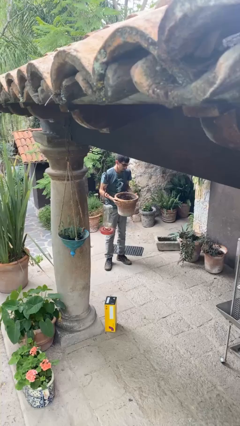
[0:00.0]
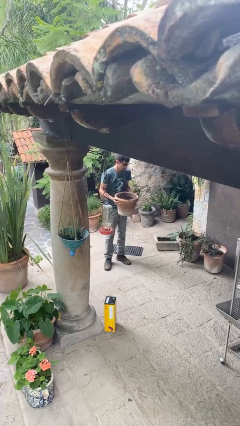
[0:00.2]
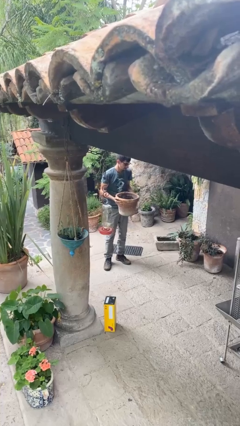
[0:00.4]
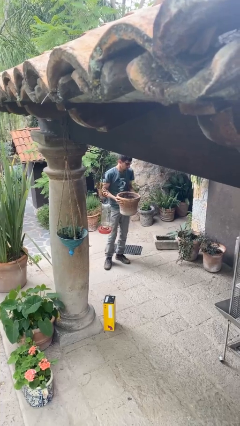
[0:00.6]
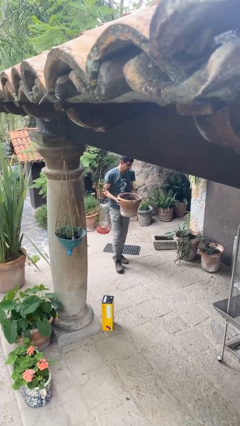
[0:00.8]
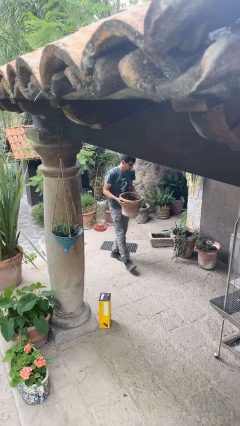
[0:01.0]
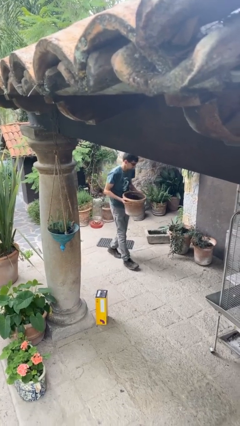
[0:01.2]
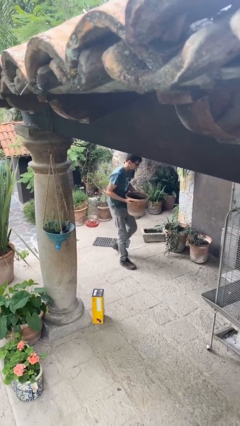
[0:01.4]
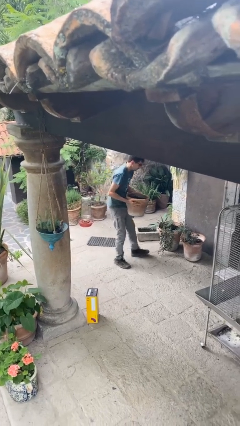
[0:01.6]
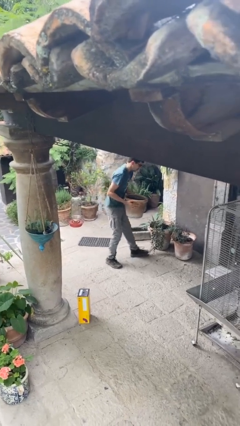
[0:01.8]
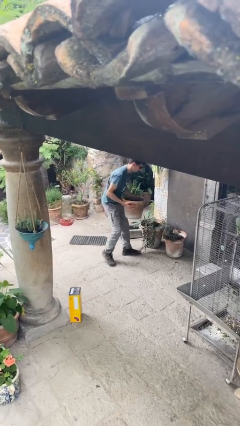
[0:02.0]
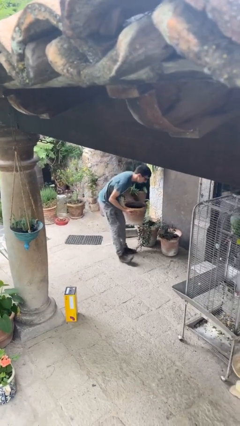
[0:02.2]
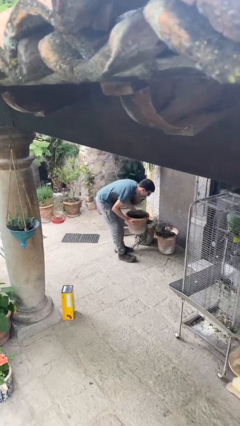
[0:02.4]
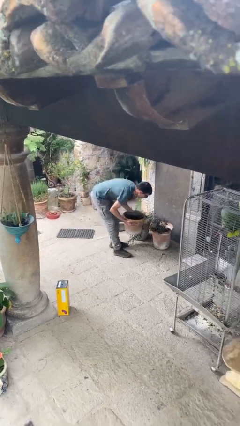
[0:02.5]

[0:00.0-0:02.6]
person carries heavy object

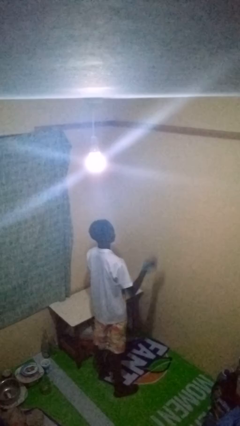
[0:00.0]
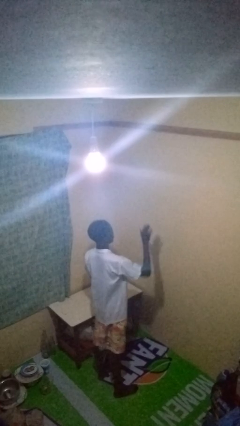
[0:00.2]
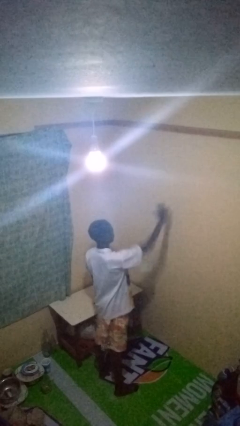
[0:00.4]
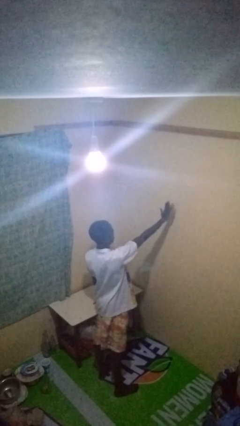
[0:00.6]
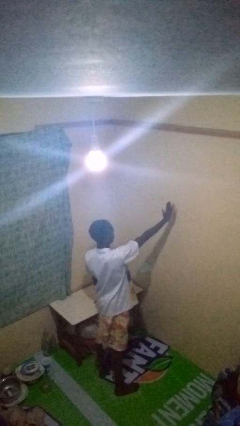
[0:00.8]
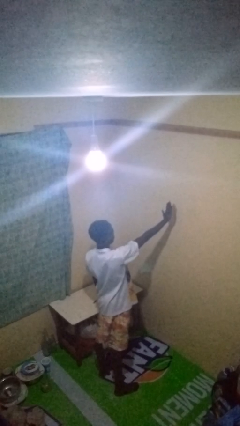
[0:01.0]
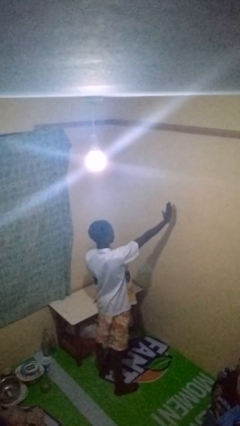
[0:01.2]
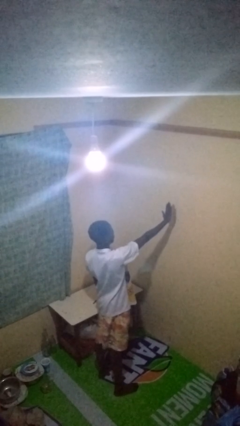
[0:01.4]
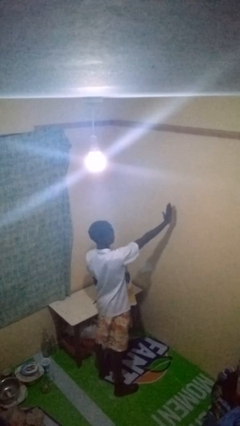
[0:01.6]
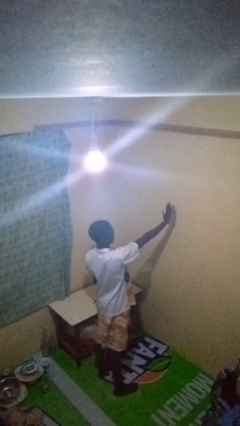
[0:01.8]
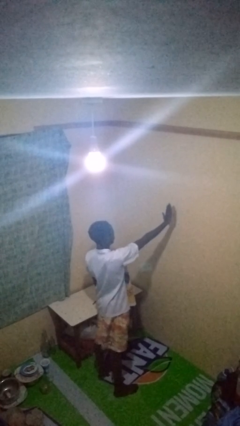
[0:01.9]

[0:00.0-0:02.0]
person gestures stop

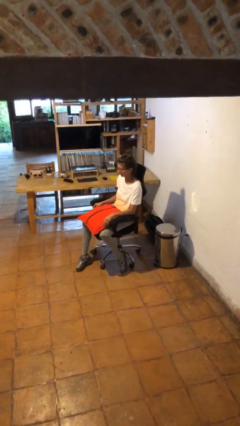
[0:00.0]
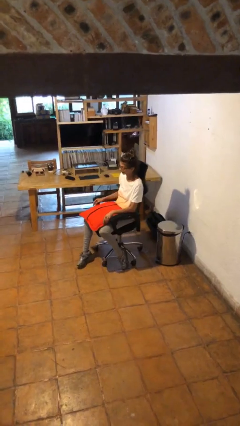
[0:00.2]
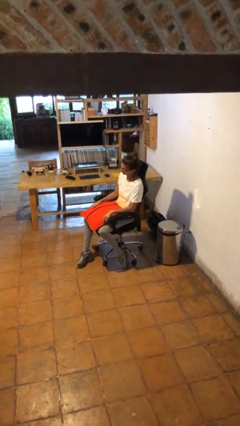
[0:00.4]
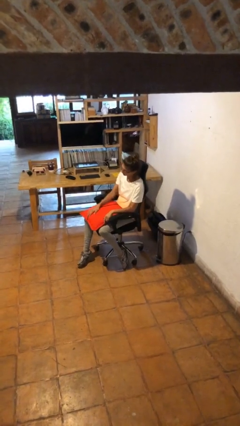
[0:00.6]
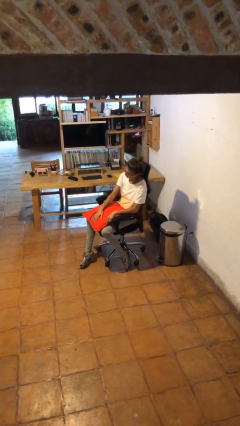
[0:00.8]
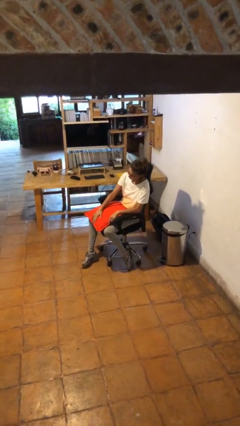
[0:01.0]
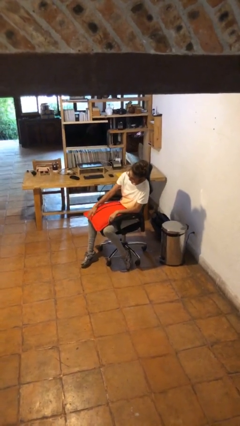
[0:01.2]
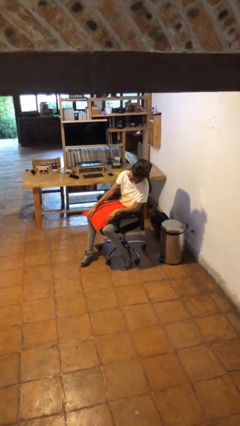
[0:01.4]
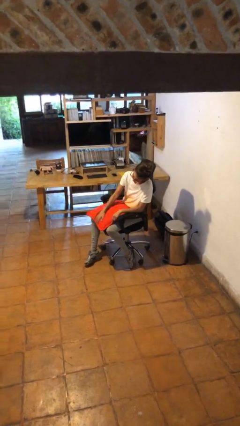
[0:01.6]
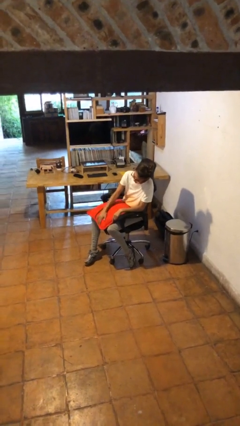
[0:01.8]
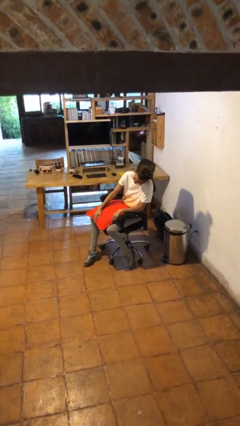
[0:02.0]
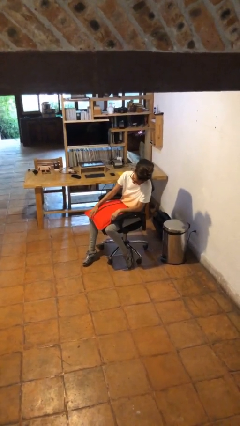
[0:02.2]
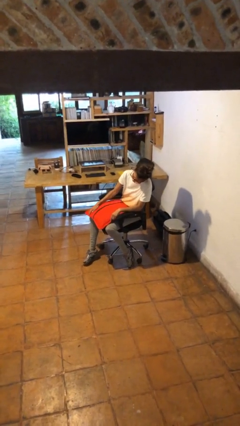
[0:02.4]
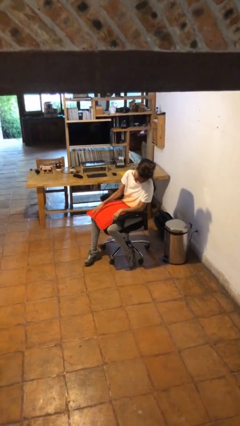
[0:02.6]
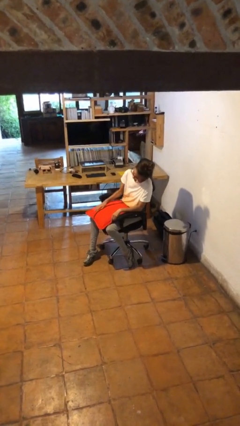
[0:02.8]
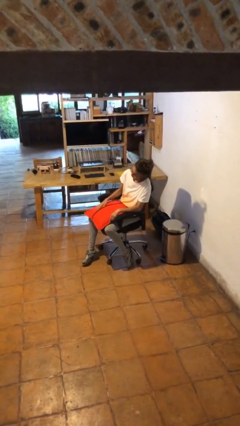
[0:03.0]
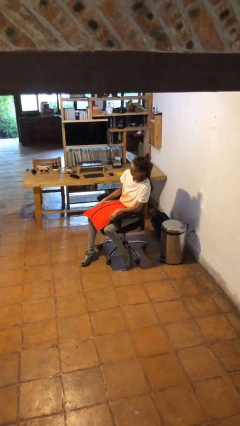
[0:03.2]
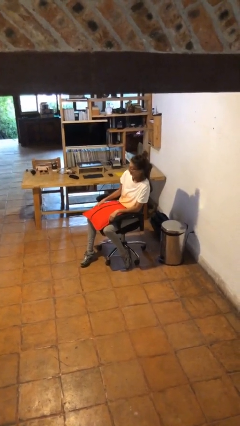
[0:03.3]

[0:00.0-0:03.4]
person waves hand over object

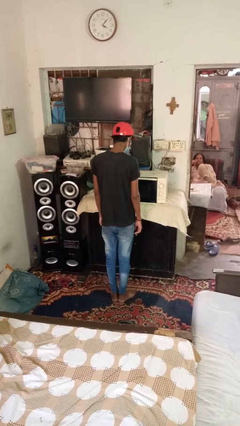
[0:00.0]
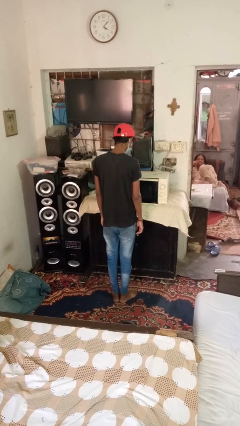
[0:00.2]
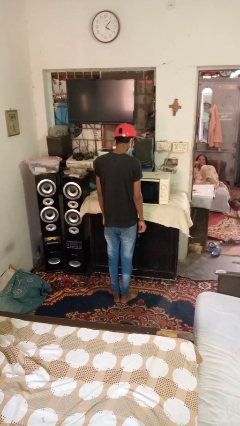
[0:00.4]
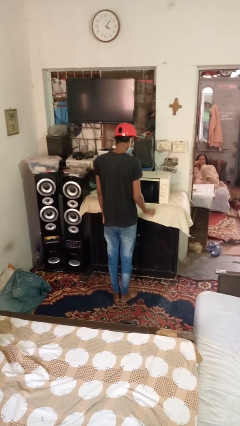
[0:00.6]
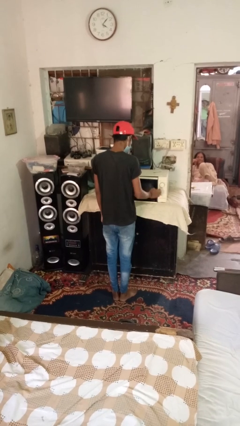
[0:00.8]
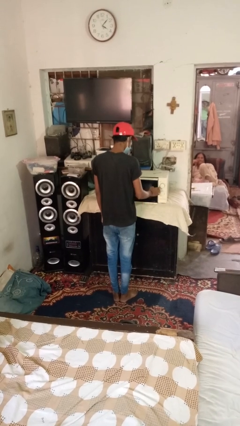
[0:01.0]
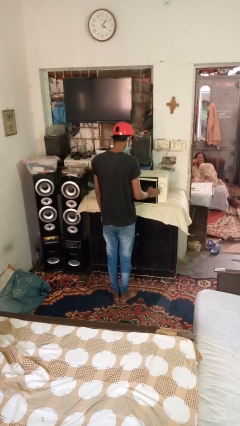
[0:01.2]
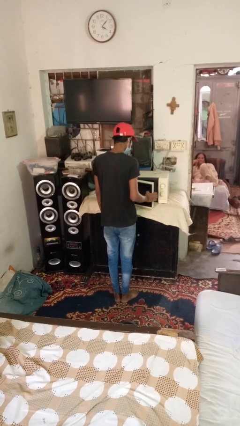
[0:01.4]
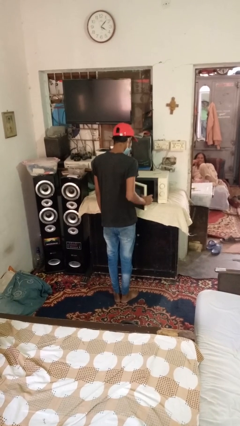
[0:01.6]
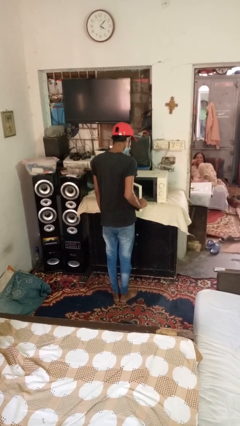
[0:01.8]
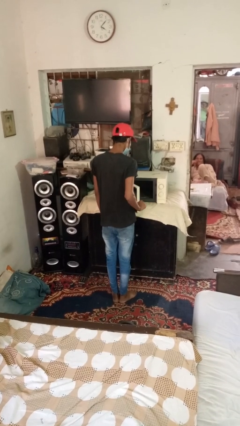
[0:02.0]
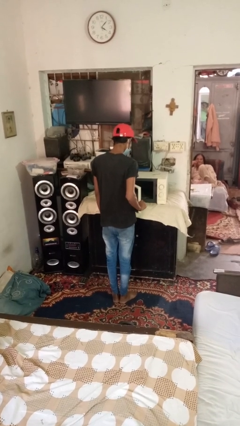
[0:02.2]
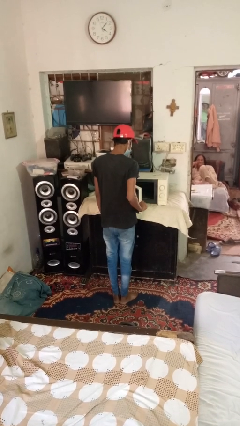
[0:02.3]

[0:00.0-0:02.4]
person opens dishwasher

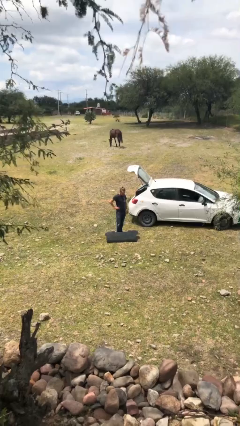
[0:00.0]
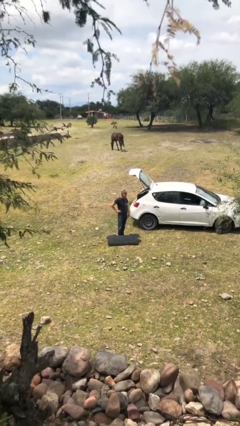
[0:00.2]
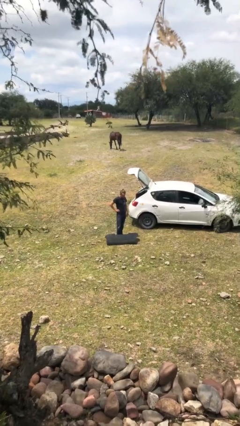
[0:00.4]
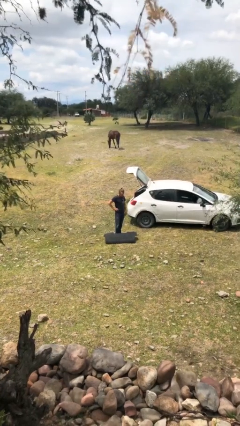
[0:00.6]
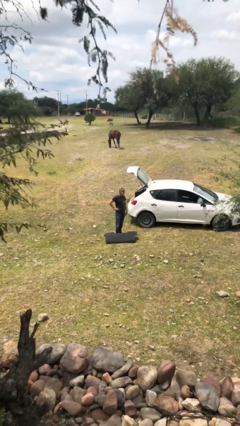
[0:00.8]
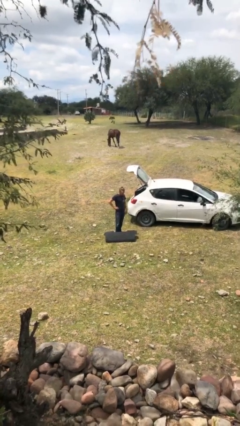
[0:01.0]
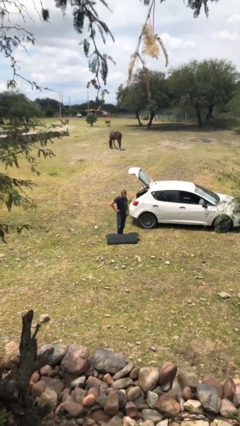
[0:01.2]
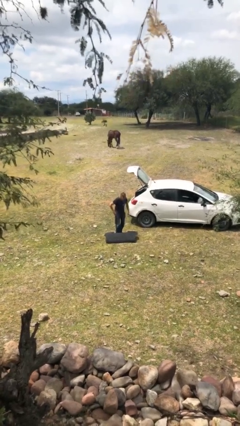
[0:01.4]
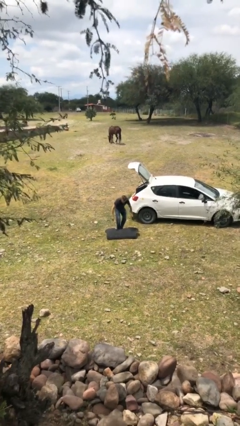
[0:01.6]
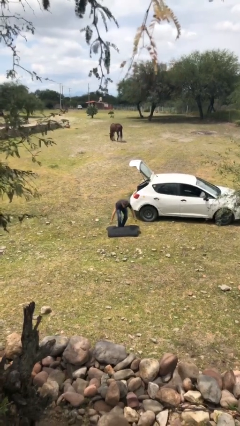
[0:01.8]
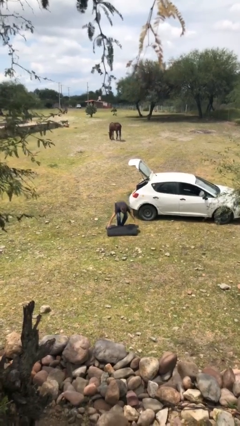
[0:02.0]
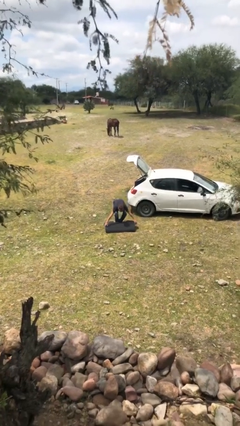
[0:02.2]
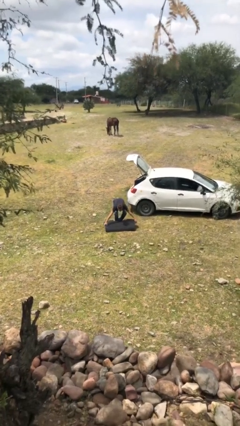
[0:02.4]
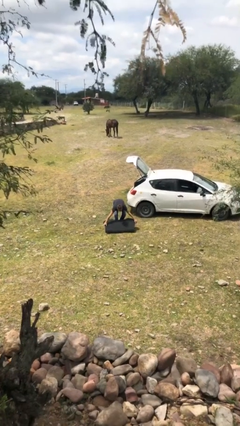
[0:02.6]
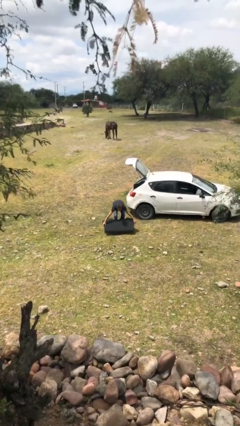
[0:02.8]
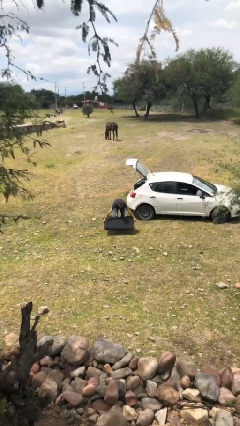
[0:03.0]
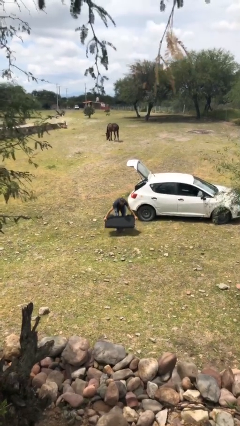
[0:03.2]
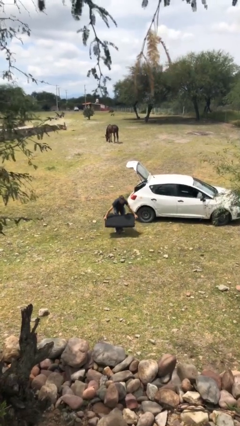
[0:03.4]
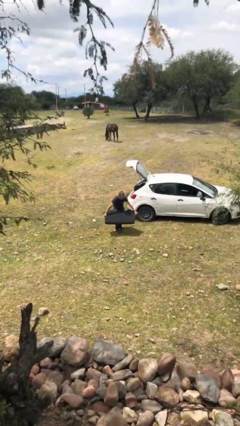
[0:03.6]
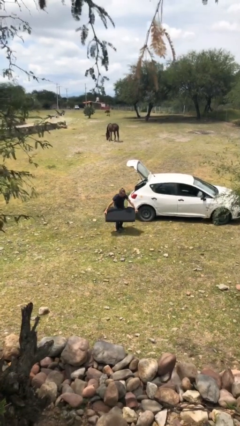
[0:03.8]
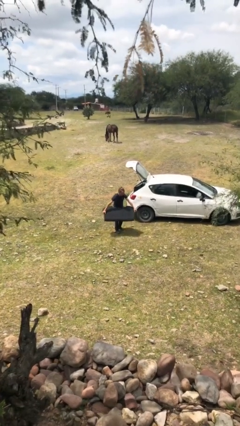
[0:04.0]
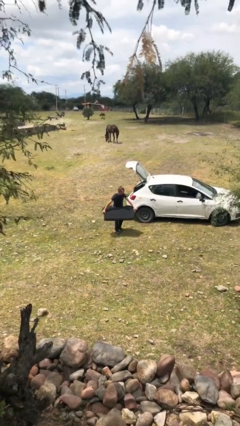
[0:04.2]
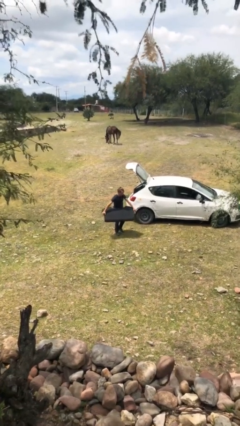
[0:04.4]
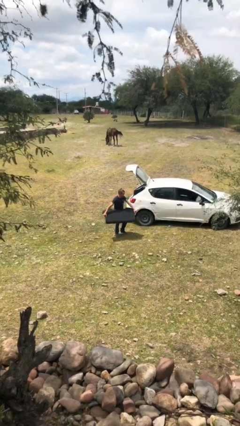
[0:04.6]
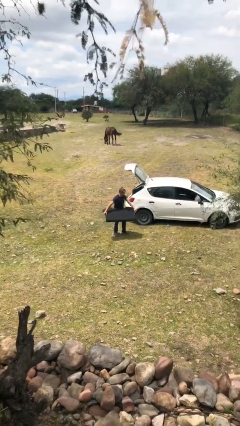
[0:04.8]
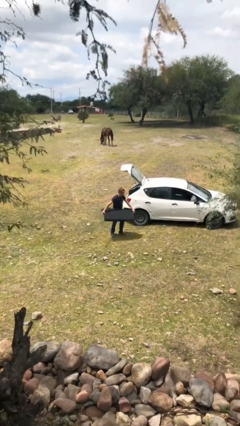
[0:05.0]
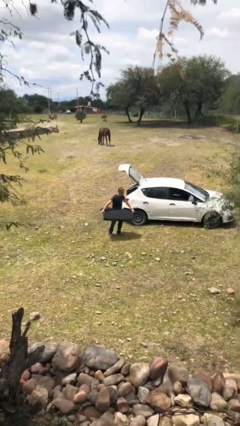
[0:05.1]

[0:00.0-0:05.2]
person picks up object from floor

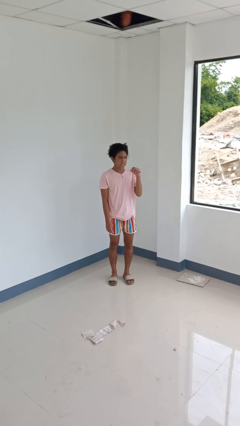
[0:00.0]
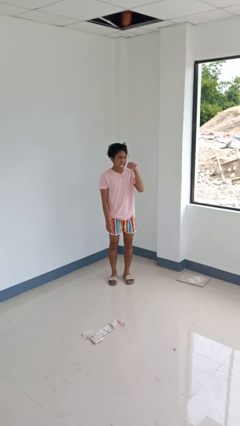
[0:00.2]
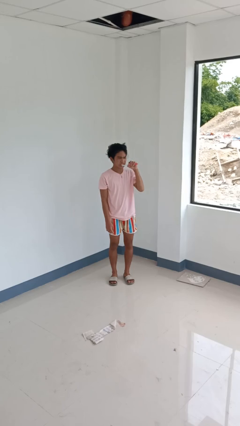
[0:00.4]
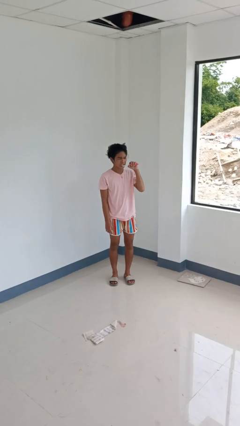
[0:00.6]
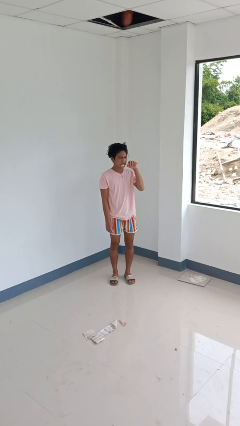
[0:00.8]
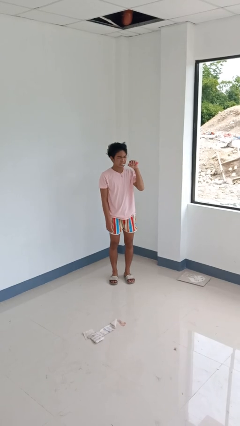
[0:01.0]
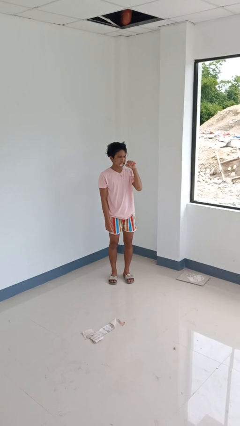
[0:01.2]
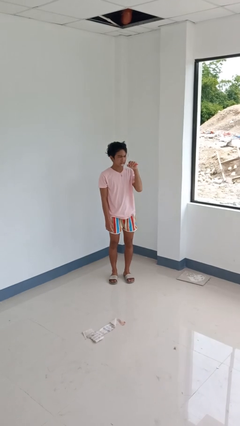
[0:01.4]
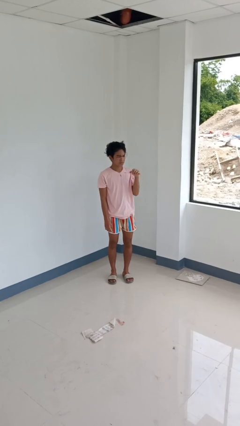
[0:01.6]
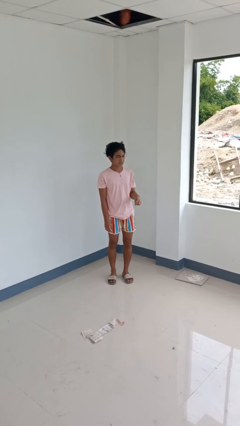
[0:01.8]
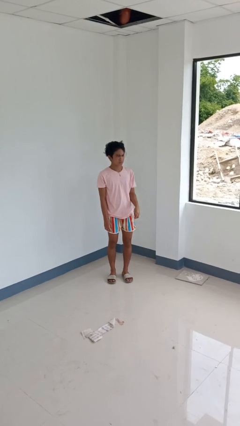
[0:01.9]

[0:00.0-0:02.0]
person brushes teeth

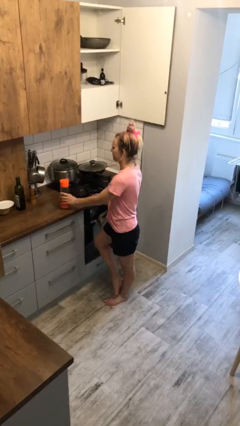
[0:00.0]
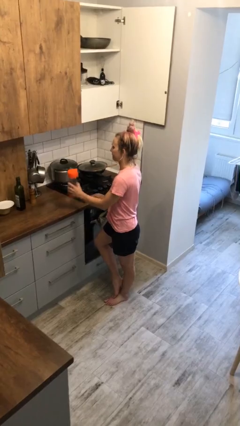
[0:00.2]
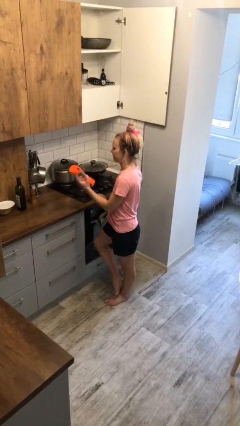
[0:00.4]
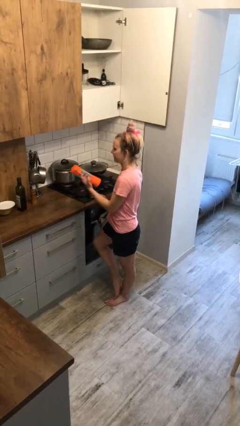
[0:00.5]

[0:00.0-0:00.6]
person picks up object from countertop
